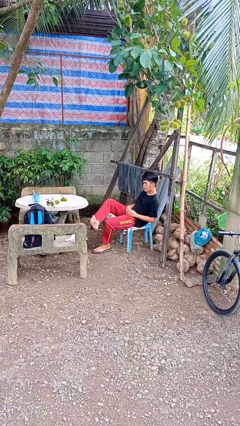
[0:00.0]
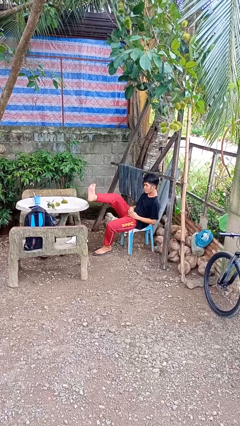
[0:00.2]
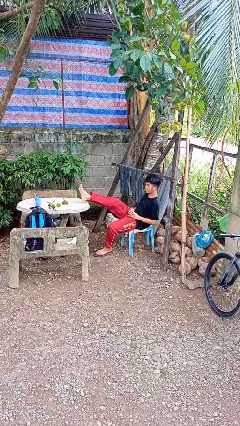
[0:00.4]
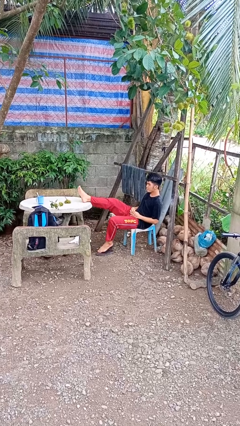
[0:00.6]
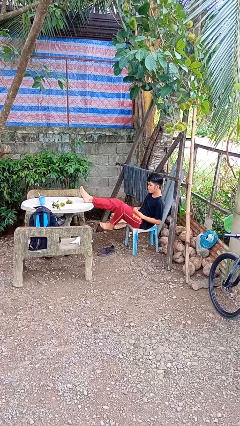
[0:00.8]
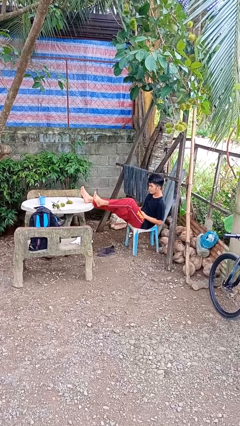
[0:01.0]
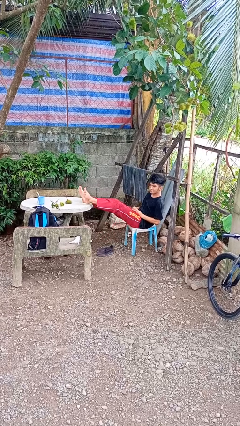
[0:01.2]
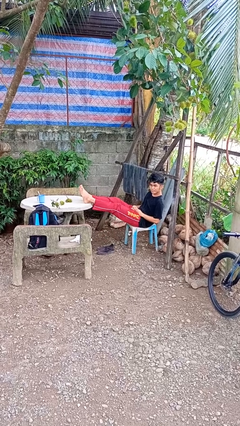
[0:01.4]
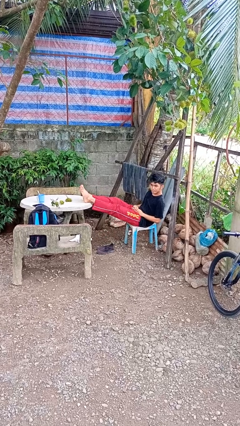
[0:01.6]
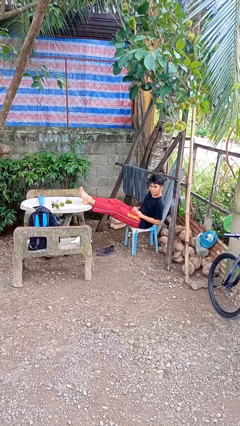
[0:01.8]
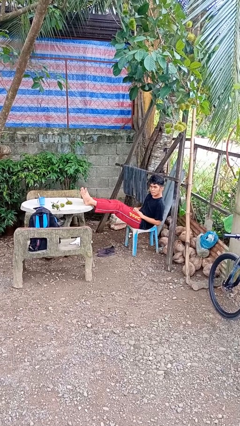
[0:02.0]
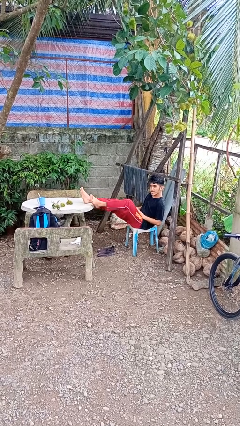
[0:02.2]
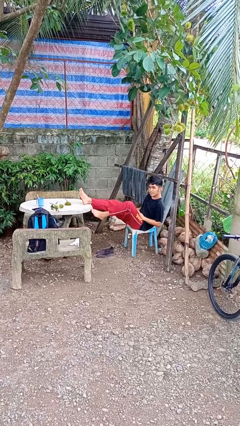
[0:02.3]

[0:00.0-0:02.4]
person puts feet up

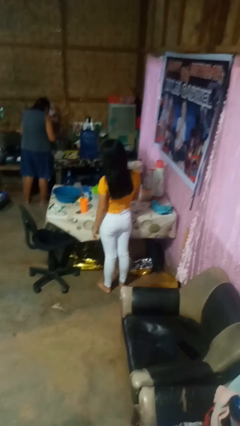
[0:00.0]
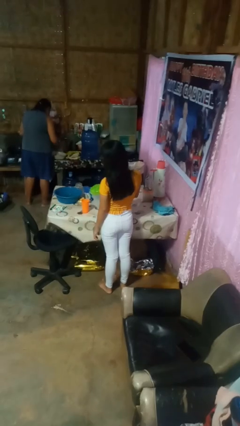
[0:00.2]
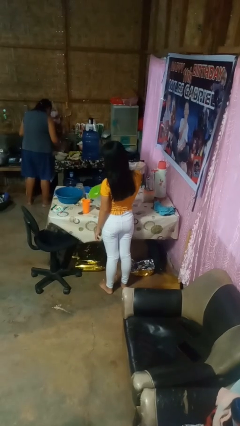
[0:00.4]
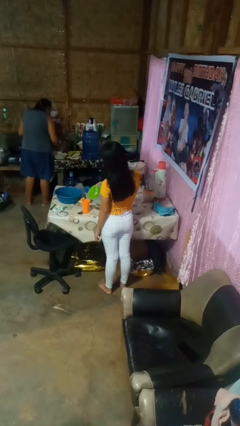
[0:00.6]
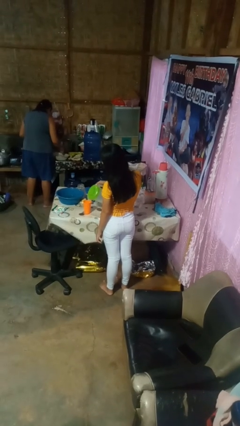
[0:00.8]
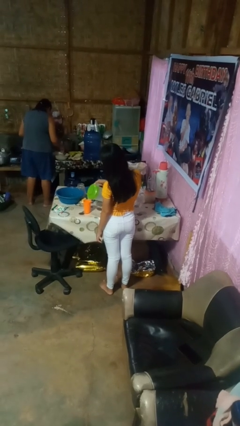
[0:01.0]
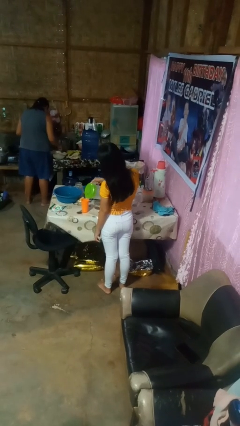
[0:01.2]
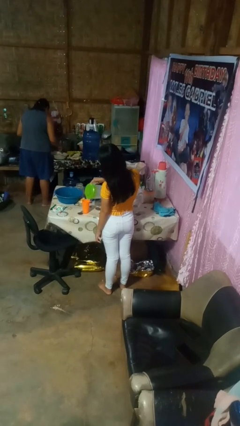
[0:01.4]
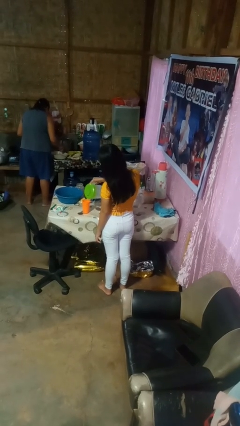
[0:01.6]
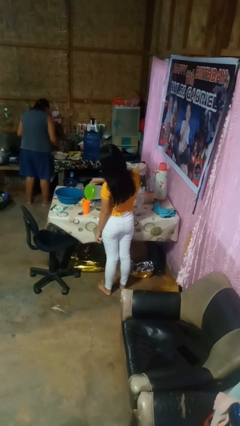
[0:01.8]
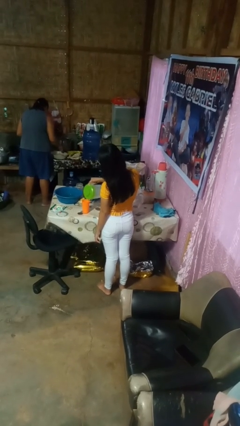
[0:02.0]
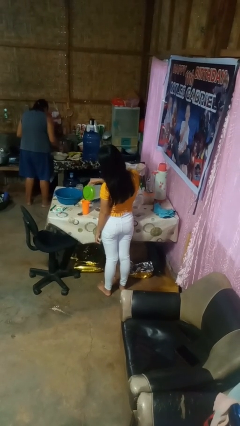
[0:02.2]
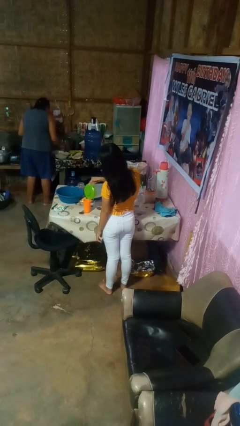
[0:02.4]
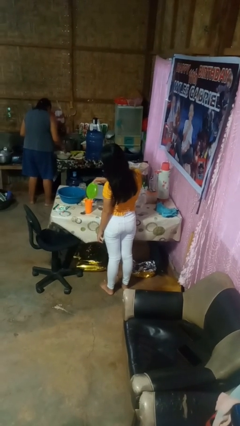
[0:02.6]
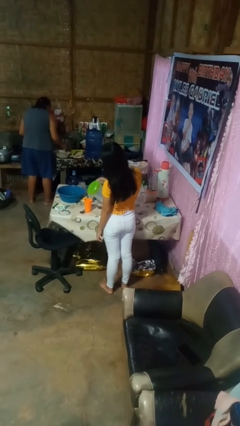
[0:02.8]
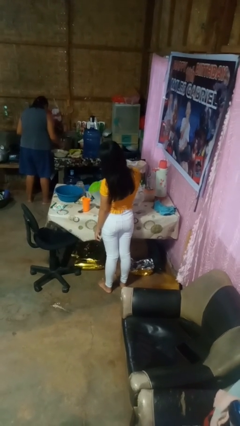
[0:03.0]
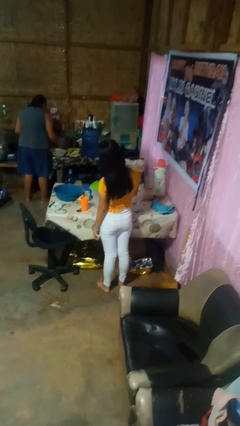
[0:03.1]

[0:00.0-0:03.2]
person pours liquid into cup

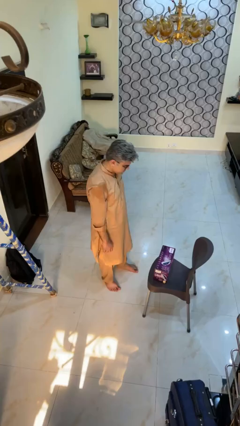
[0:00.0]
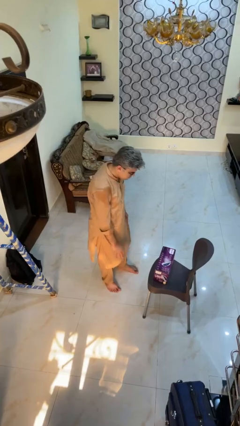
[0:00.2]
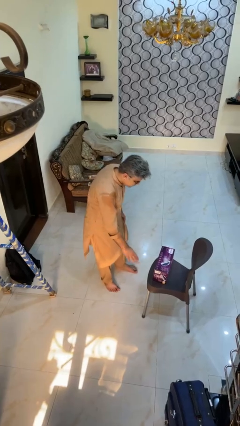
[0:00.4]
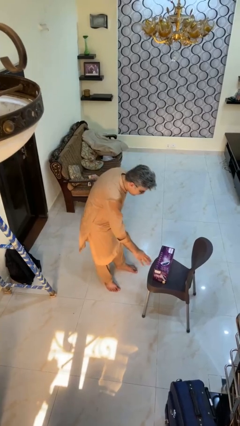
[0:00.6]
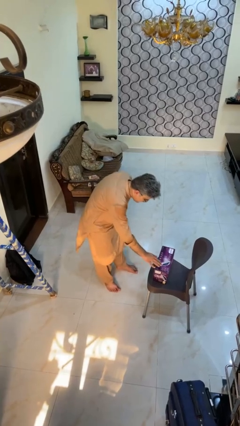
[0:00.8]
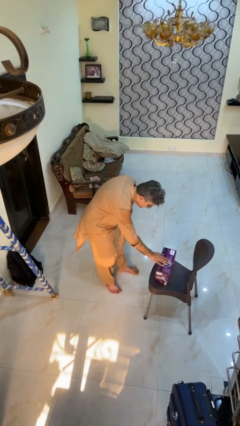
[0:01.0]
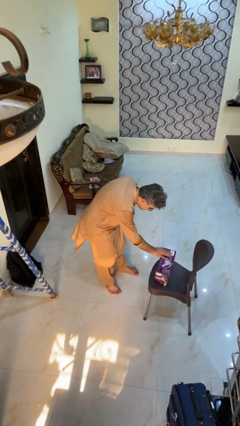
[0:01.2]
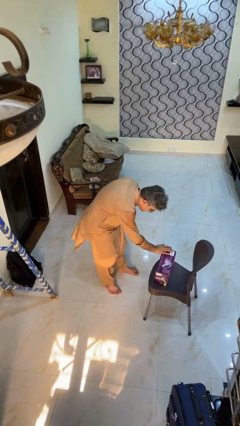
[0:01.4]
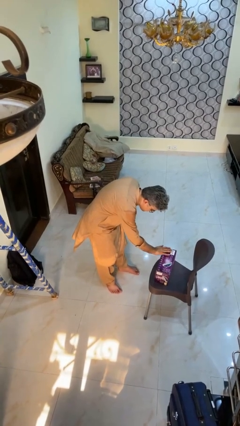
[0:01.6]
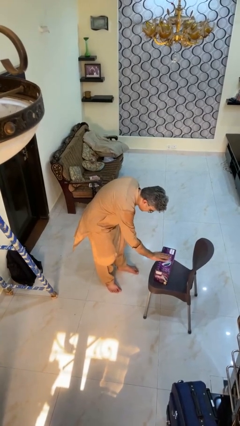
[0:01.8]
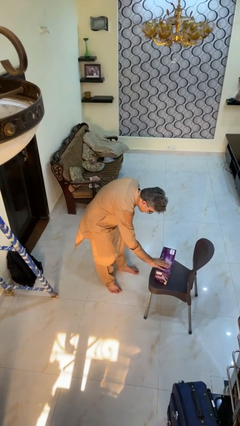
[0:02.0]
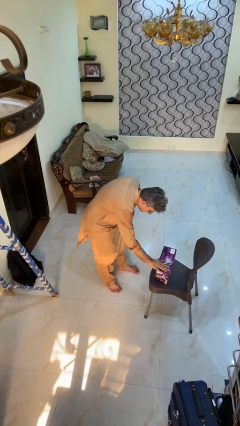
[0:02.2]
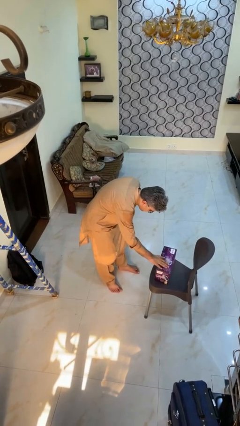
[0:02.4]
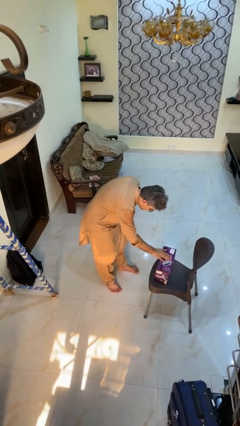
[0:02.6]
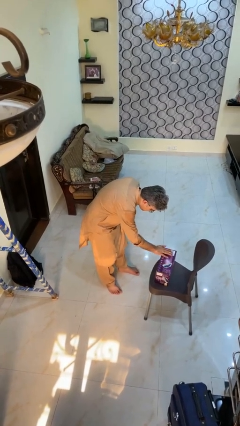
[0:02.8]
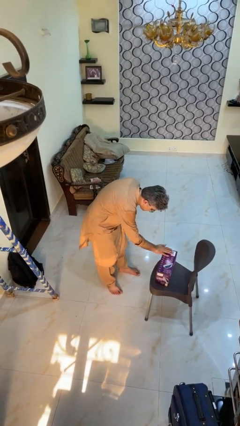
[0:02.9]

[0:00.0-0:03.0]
person waves hand over object

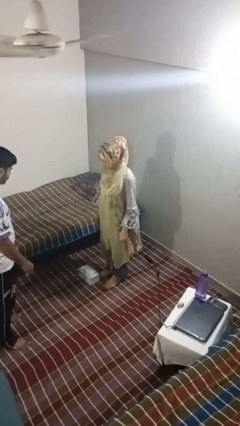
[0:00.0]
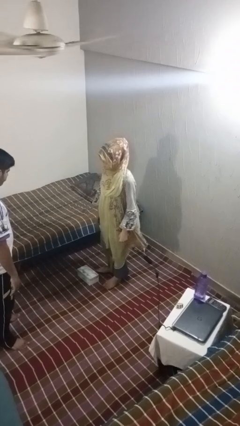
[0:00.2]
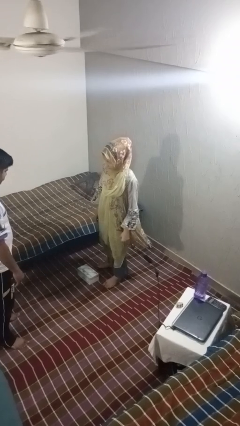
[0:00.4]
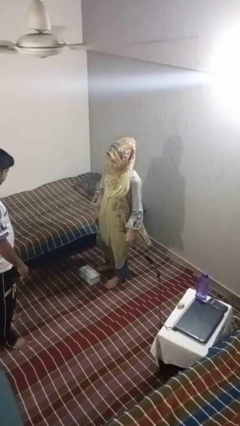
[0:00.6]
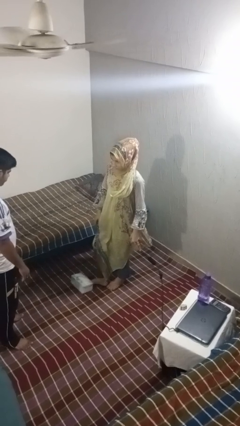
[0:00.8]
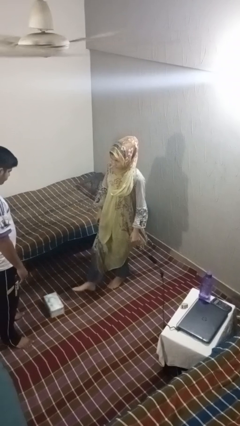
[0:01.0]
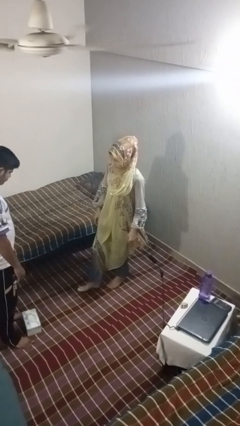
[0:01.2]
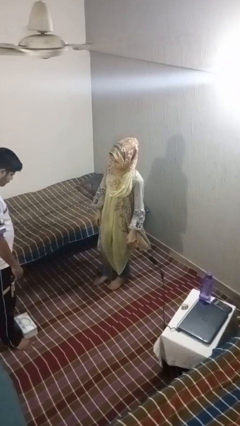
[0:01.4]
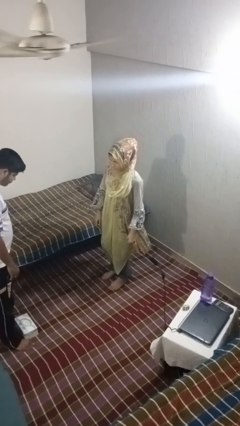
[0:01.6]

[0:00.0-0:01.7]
person kicks object to person

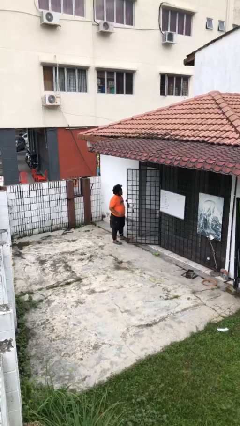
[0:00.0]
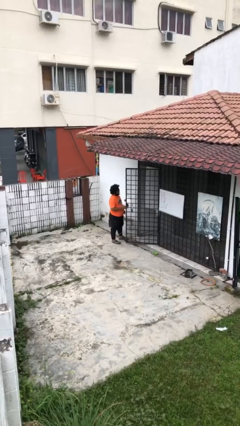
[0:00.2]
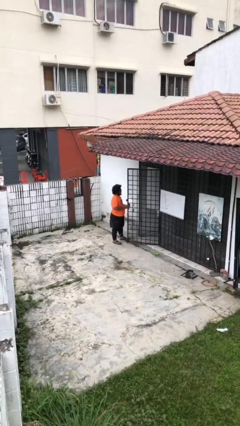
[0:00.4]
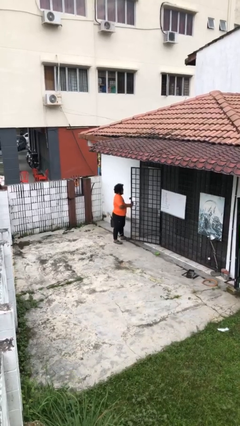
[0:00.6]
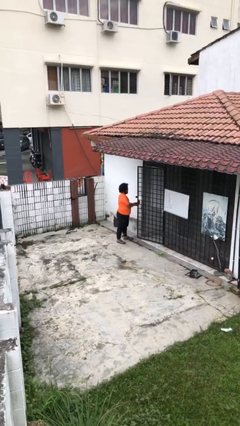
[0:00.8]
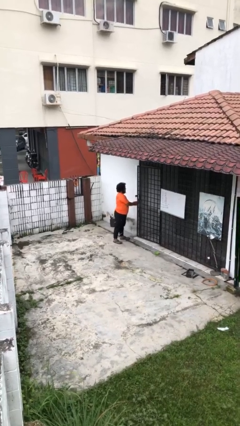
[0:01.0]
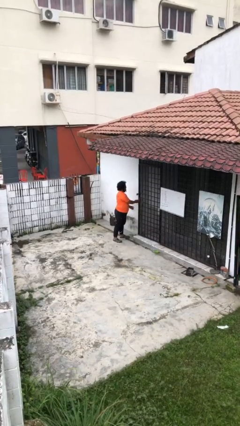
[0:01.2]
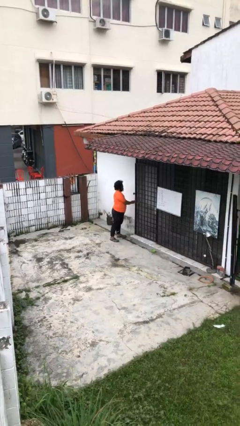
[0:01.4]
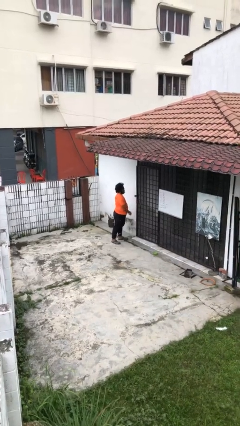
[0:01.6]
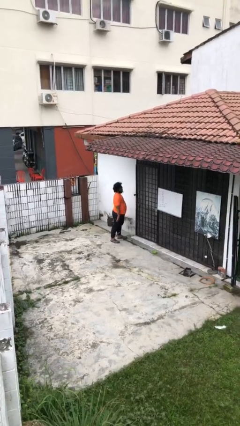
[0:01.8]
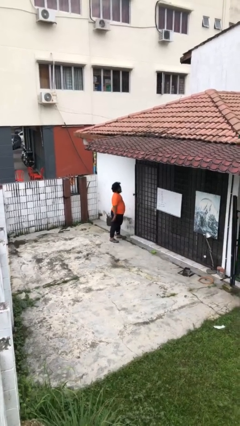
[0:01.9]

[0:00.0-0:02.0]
person closes facility door

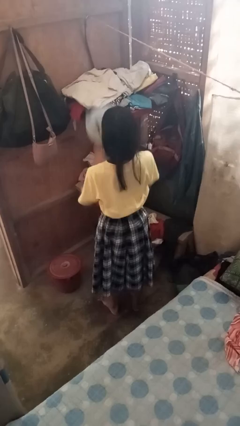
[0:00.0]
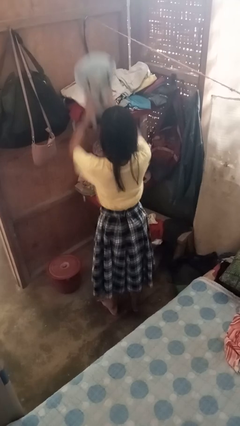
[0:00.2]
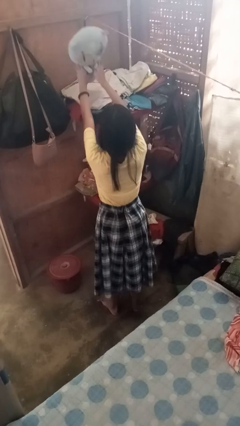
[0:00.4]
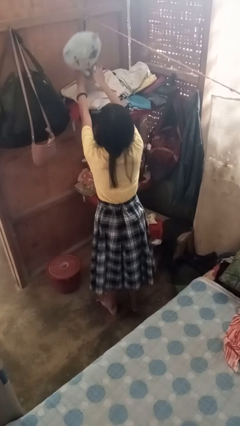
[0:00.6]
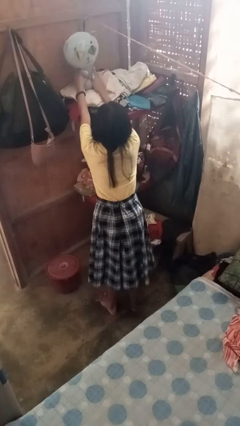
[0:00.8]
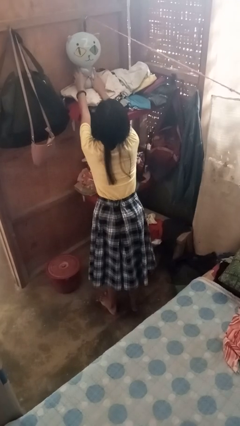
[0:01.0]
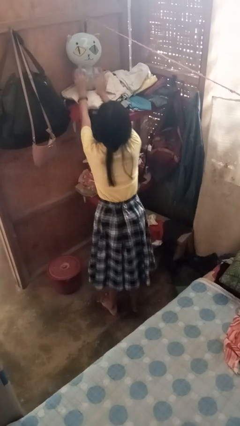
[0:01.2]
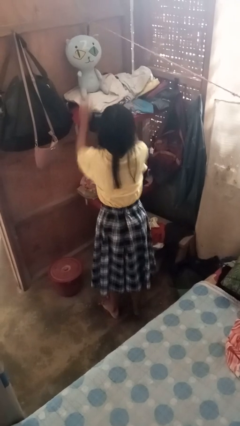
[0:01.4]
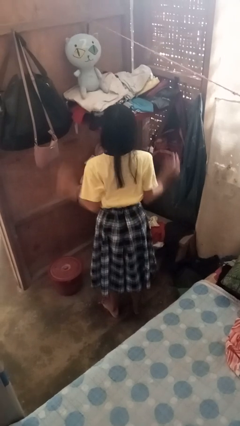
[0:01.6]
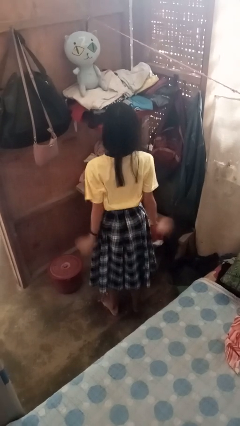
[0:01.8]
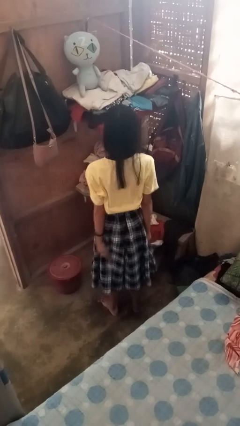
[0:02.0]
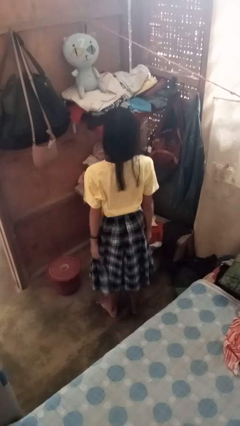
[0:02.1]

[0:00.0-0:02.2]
person puts down object on shelf

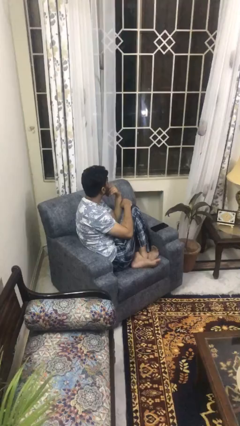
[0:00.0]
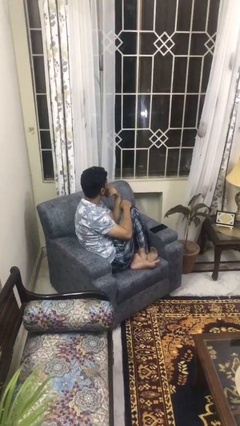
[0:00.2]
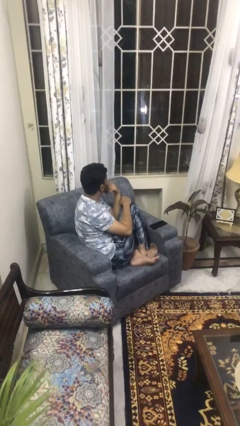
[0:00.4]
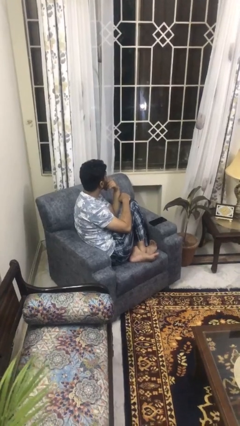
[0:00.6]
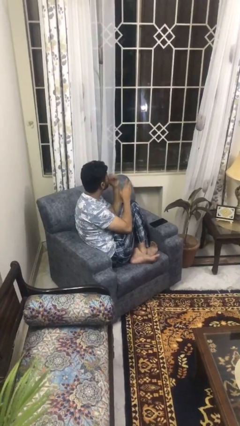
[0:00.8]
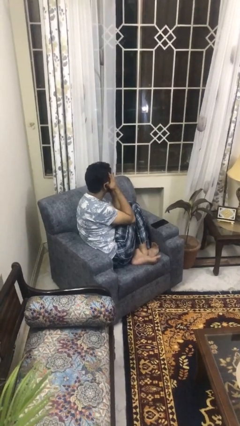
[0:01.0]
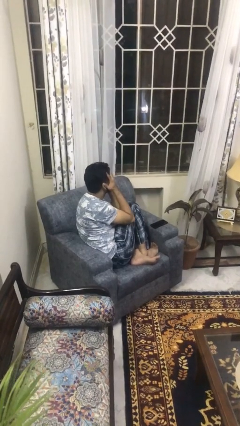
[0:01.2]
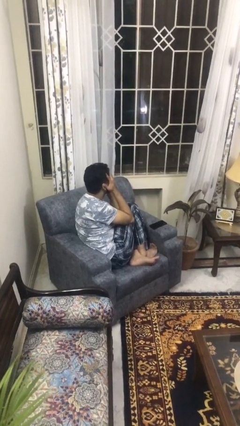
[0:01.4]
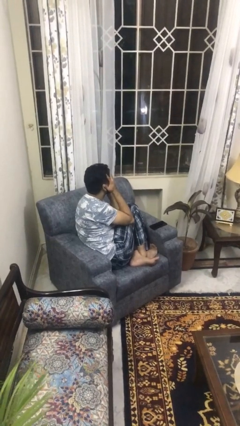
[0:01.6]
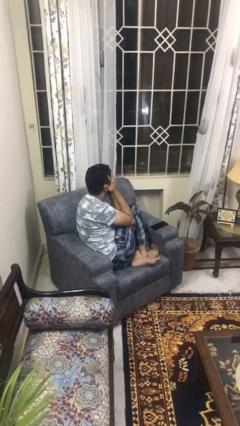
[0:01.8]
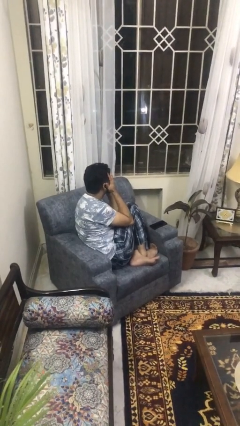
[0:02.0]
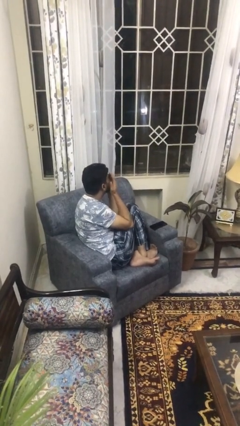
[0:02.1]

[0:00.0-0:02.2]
person covers face with hands

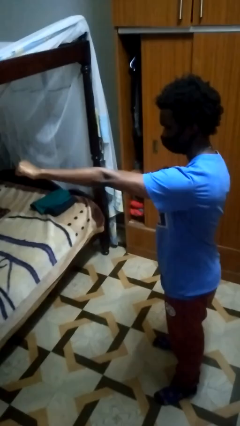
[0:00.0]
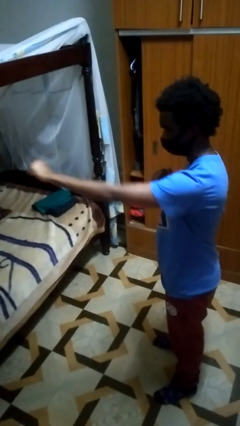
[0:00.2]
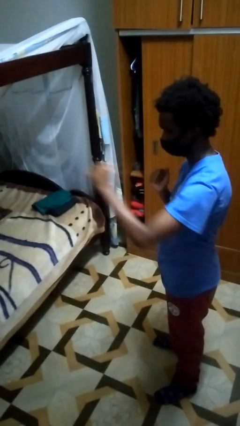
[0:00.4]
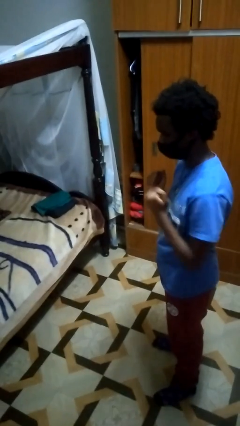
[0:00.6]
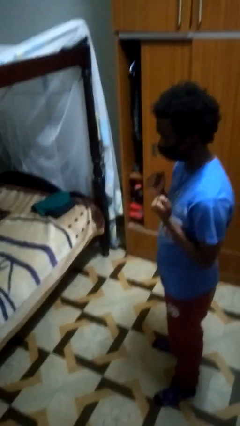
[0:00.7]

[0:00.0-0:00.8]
person punches
